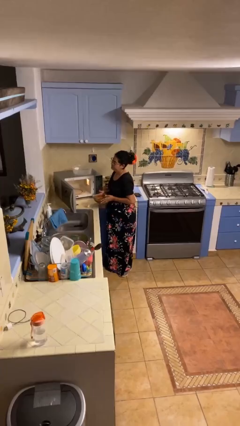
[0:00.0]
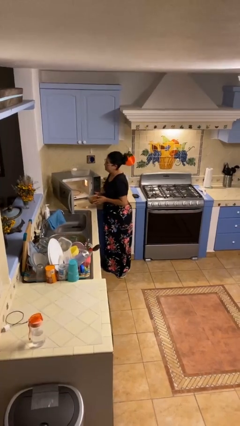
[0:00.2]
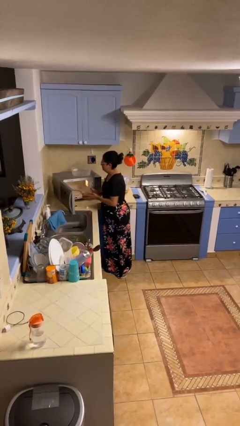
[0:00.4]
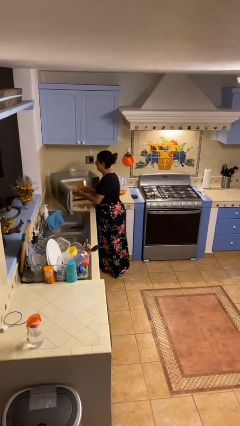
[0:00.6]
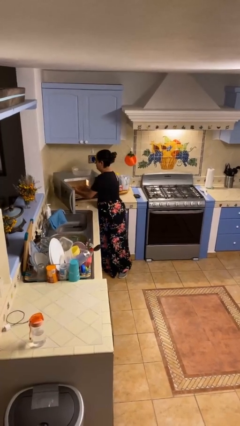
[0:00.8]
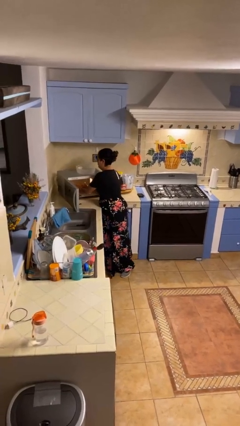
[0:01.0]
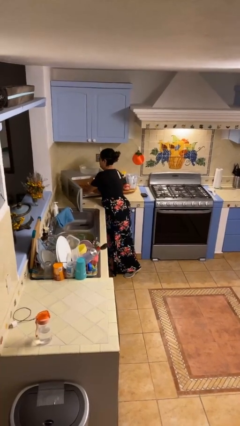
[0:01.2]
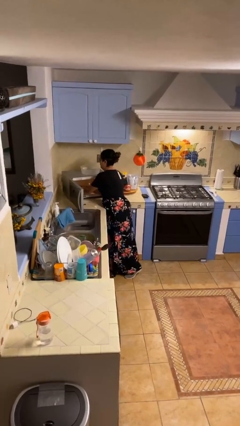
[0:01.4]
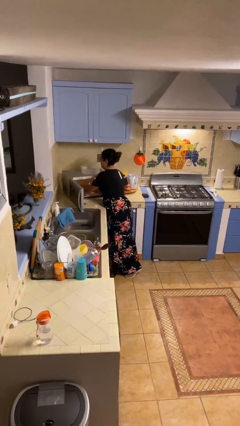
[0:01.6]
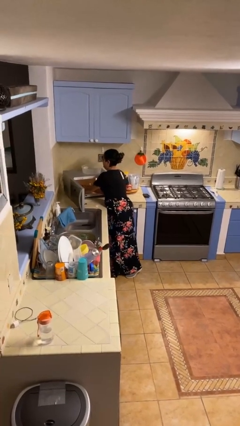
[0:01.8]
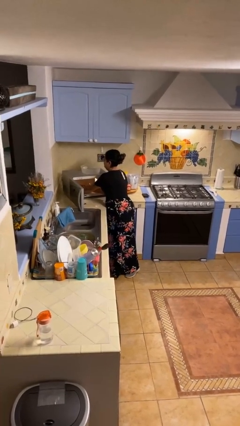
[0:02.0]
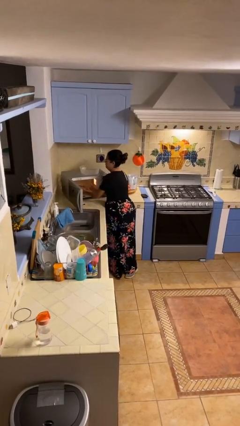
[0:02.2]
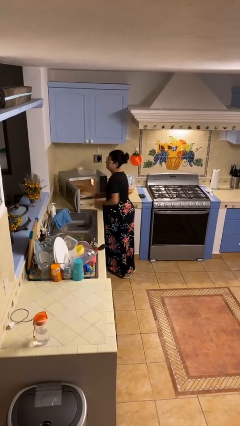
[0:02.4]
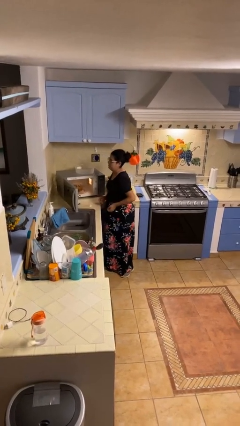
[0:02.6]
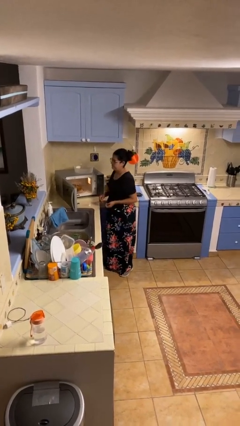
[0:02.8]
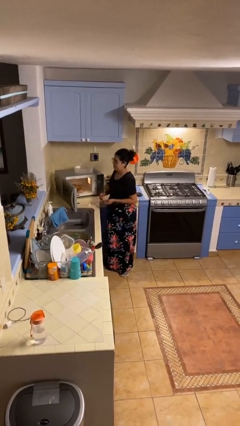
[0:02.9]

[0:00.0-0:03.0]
person puts object into microwave

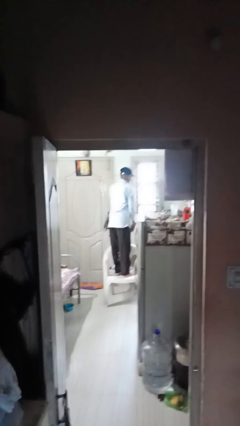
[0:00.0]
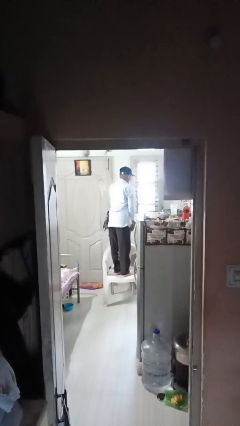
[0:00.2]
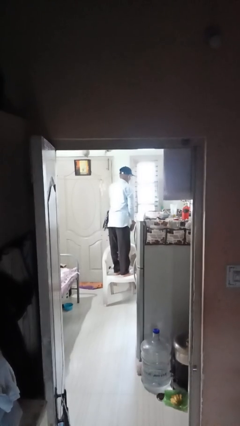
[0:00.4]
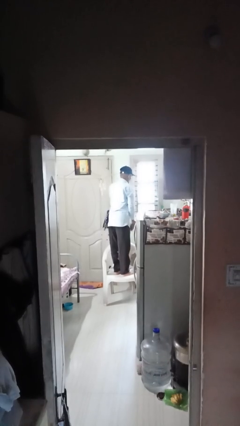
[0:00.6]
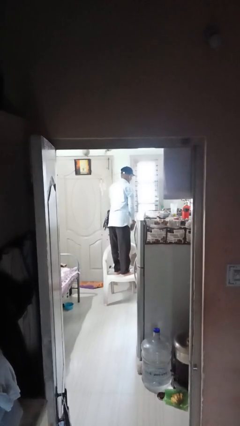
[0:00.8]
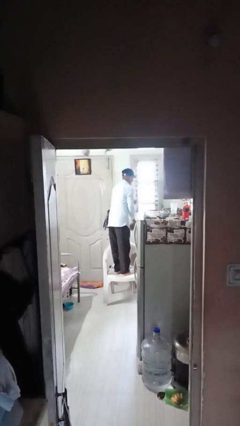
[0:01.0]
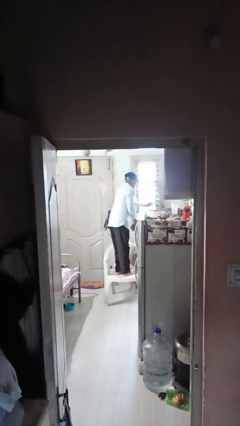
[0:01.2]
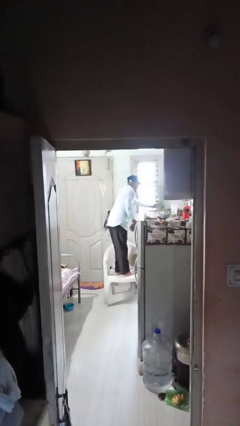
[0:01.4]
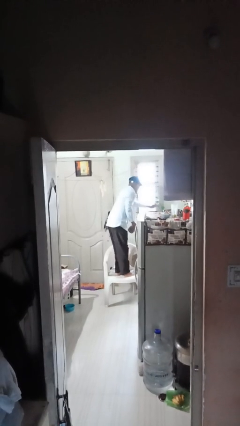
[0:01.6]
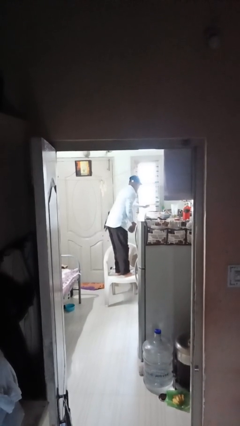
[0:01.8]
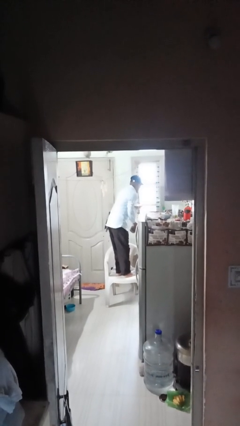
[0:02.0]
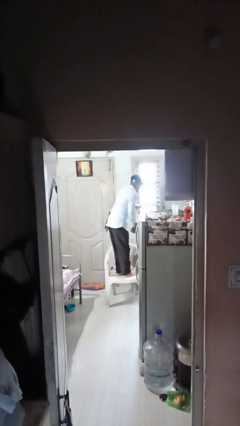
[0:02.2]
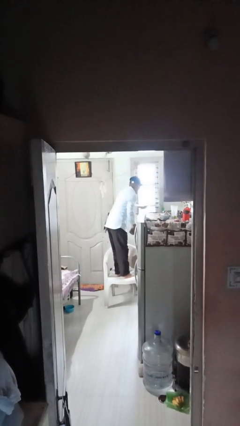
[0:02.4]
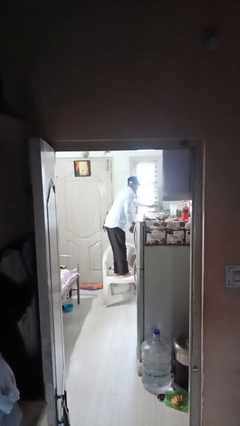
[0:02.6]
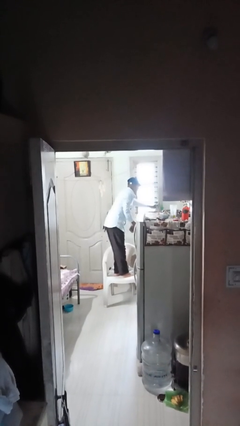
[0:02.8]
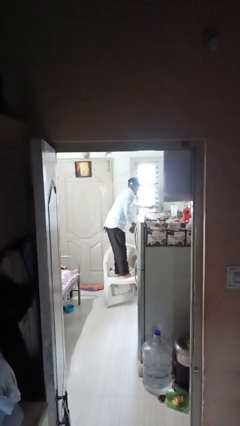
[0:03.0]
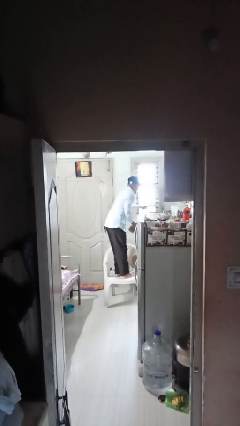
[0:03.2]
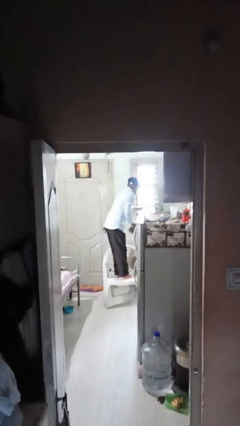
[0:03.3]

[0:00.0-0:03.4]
person washes window

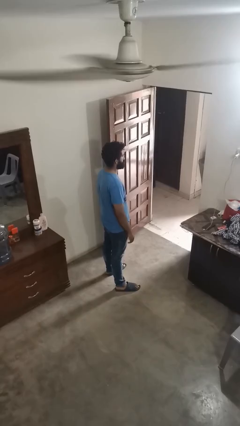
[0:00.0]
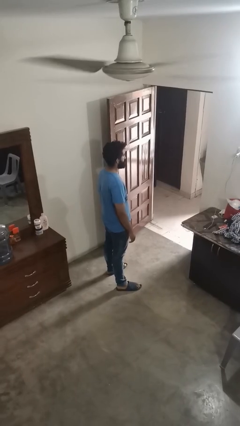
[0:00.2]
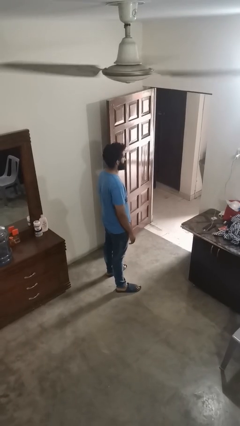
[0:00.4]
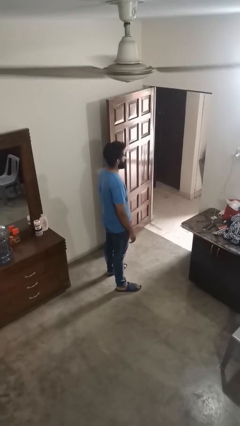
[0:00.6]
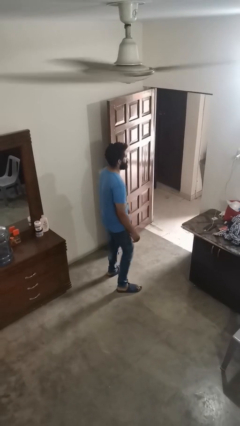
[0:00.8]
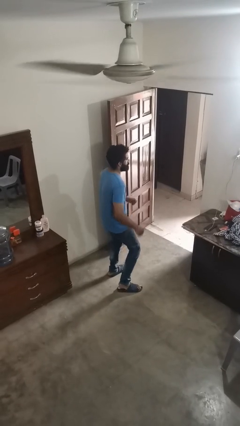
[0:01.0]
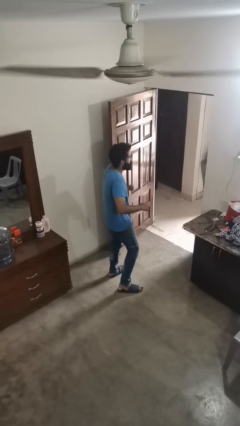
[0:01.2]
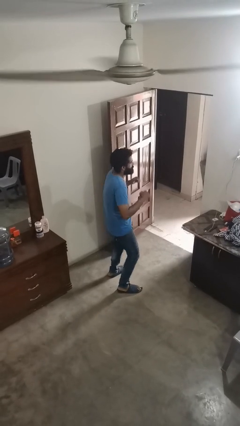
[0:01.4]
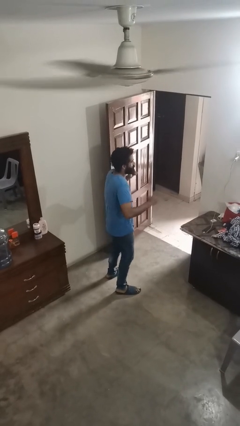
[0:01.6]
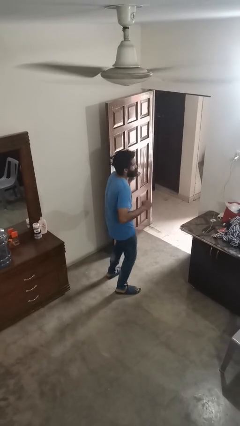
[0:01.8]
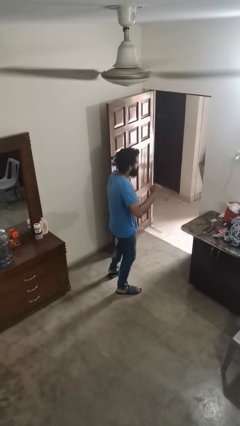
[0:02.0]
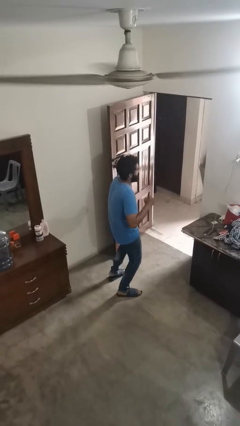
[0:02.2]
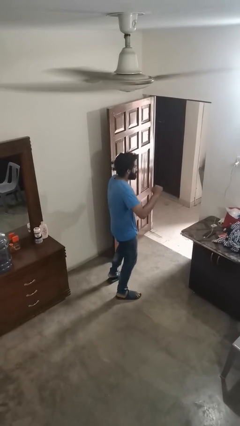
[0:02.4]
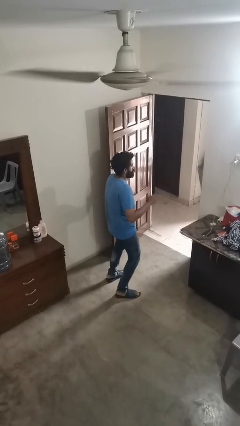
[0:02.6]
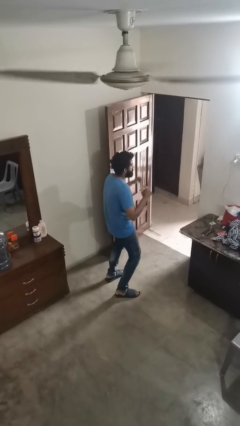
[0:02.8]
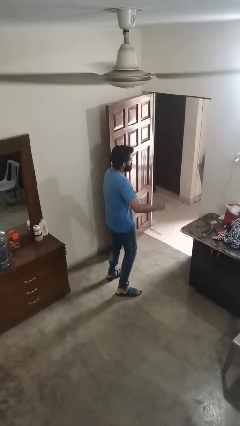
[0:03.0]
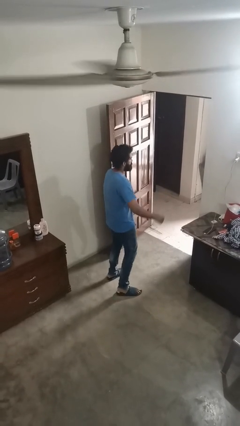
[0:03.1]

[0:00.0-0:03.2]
person dances in place

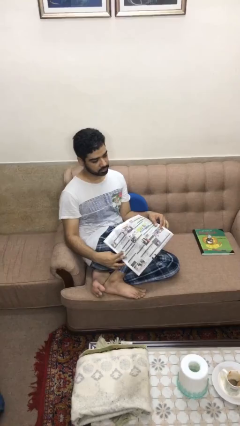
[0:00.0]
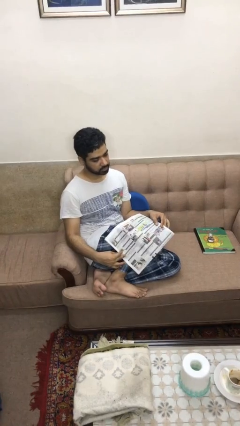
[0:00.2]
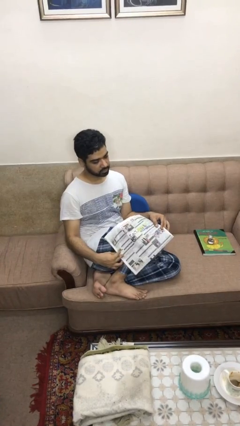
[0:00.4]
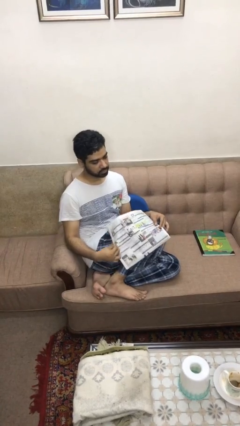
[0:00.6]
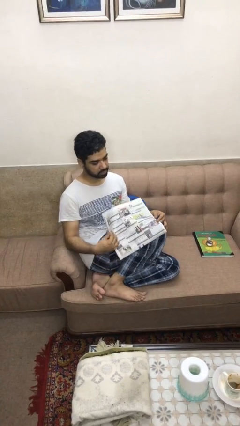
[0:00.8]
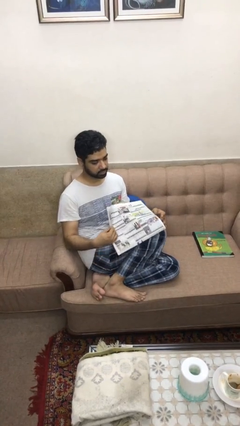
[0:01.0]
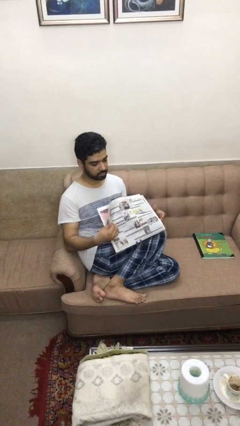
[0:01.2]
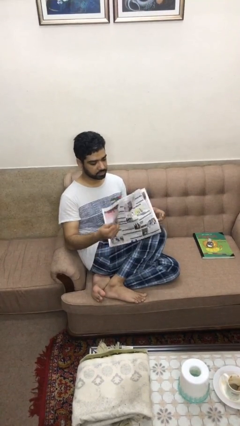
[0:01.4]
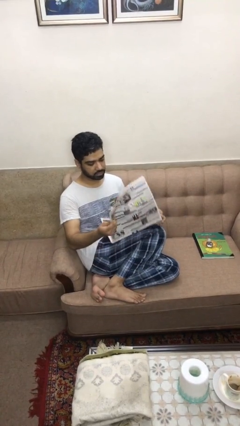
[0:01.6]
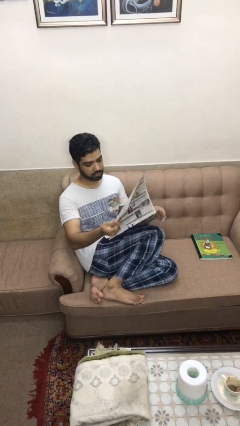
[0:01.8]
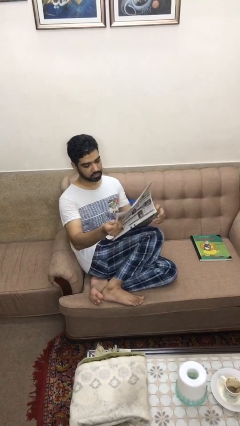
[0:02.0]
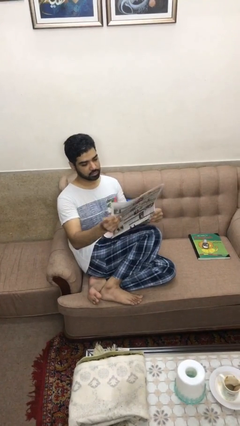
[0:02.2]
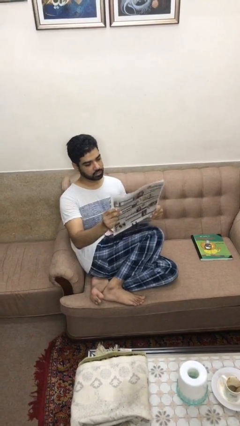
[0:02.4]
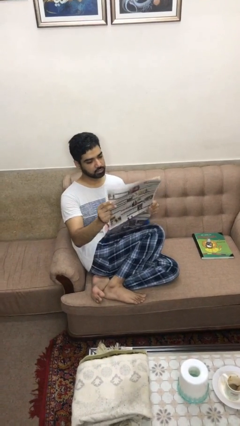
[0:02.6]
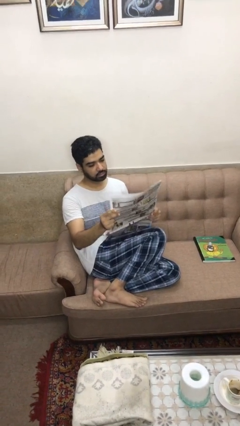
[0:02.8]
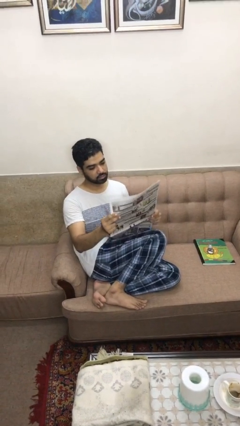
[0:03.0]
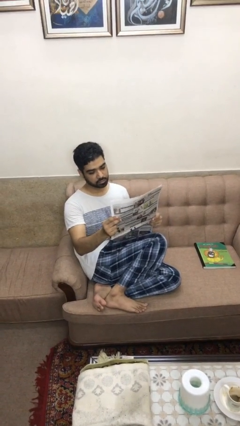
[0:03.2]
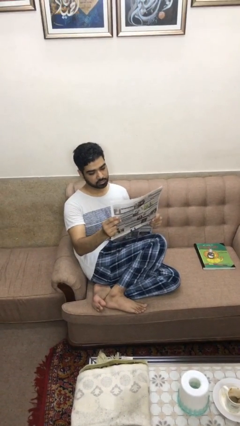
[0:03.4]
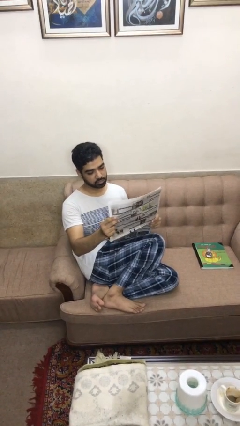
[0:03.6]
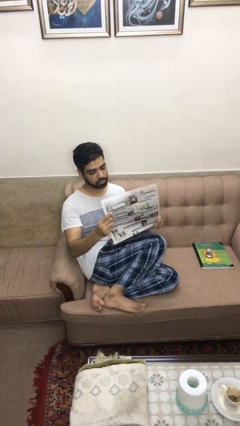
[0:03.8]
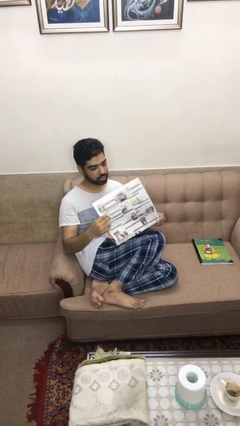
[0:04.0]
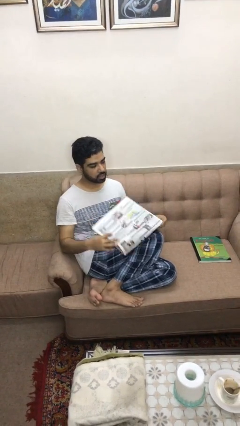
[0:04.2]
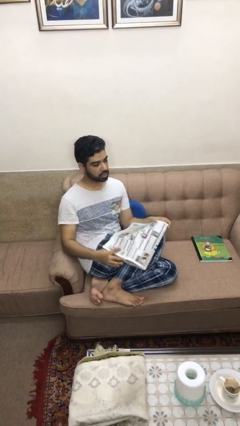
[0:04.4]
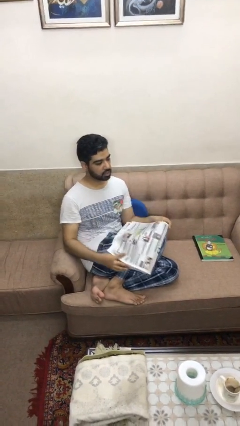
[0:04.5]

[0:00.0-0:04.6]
person reads newspaper

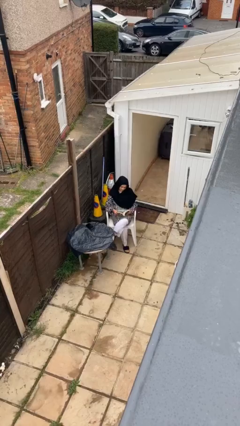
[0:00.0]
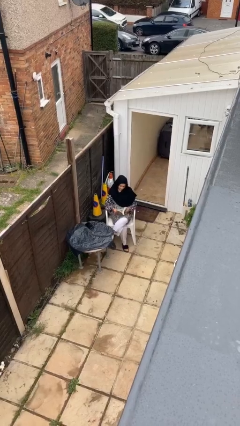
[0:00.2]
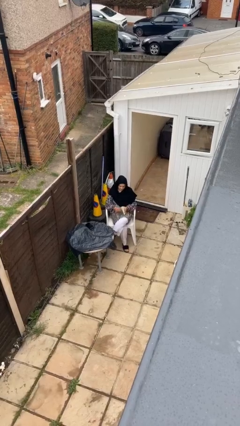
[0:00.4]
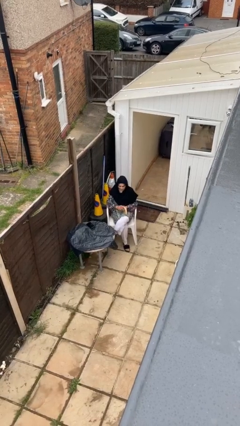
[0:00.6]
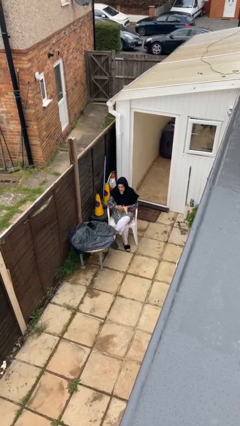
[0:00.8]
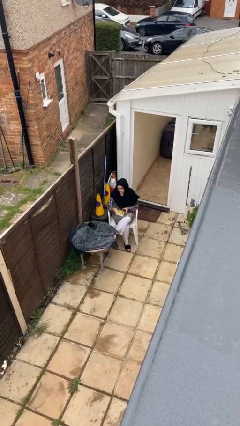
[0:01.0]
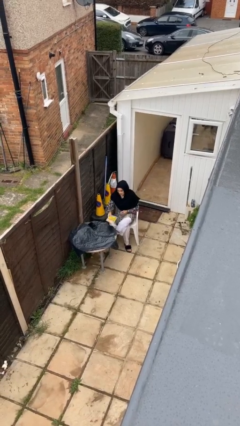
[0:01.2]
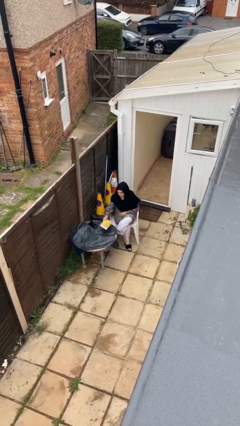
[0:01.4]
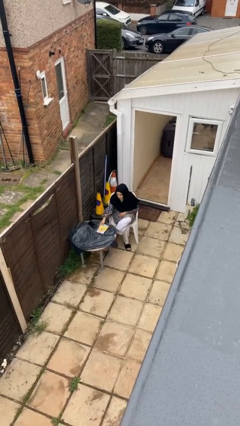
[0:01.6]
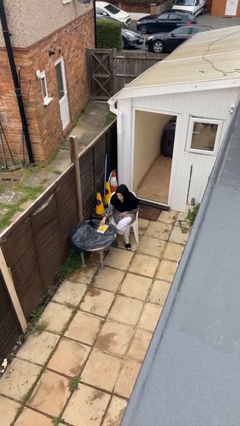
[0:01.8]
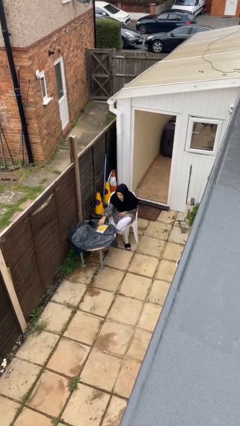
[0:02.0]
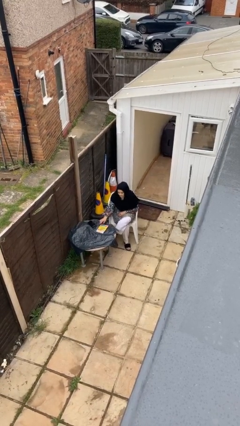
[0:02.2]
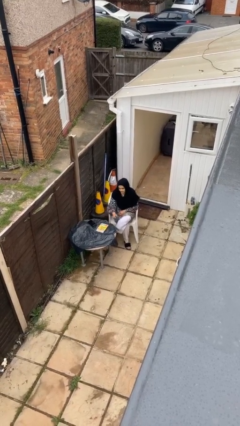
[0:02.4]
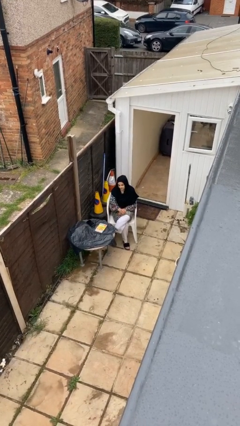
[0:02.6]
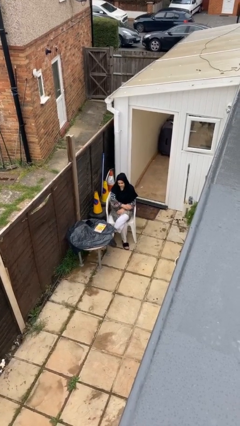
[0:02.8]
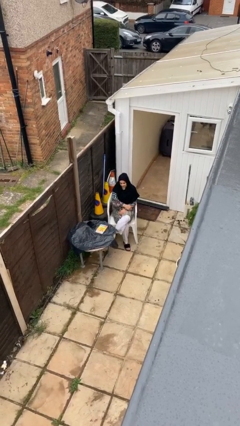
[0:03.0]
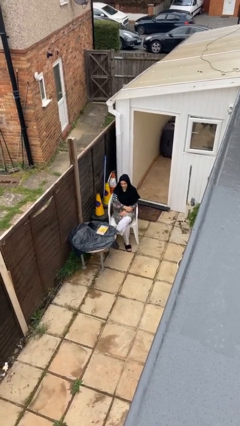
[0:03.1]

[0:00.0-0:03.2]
person puts down object on table
